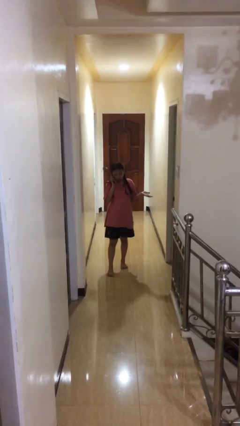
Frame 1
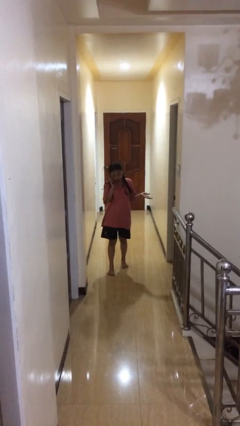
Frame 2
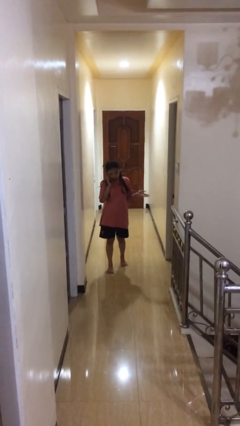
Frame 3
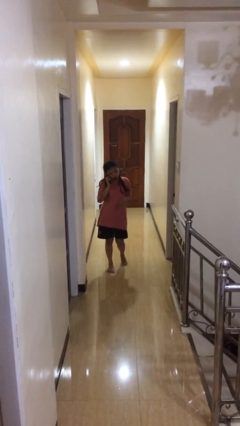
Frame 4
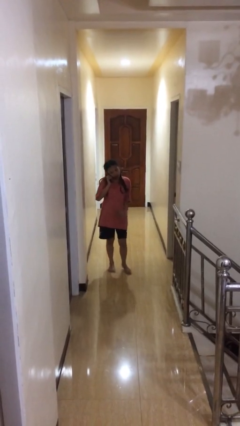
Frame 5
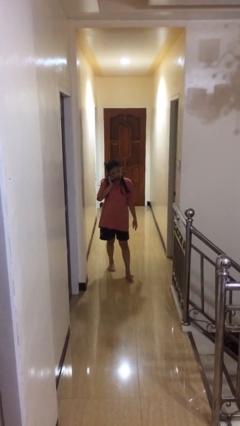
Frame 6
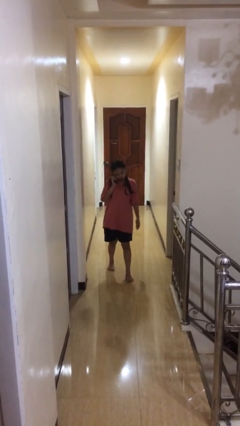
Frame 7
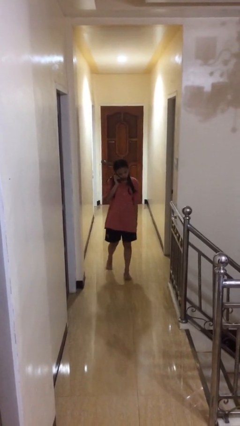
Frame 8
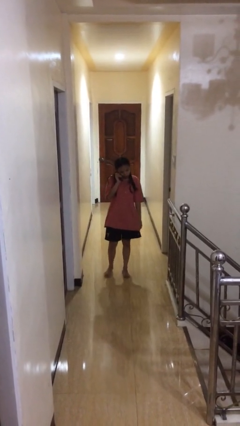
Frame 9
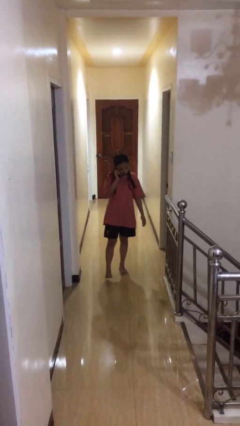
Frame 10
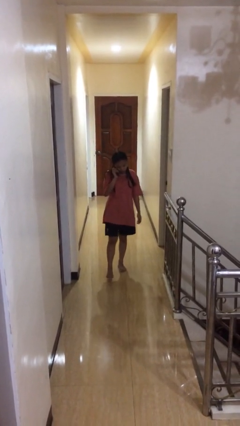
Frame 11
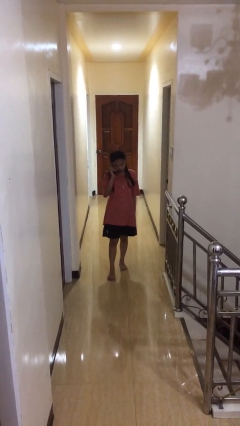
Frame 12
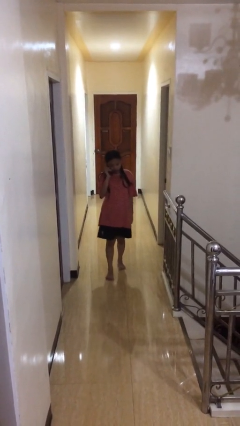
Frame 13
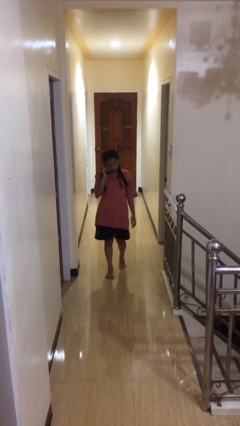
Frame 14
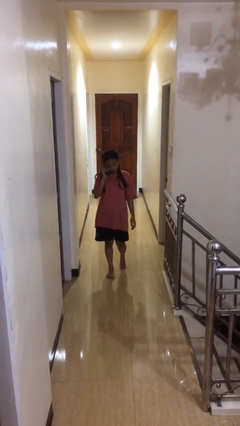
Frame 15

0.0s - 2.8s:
person talks on phone

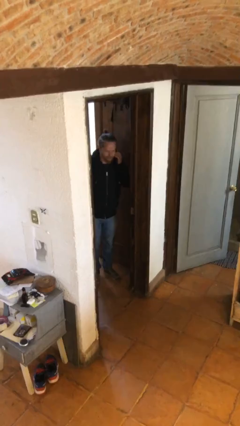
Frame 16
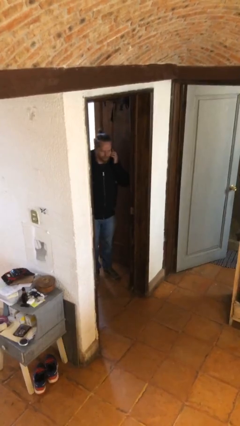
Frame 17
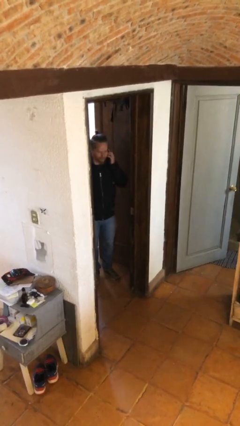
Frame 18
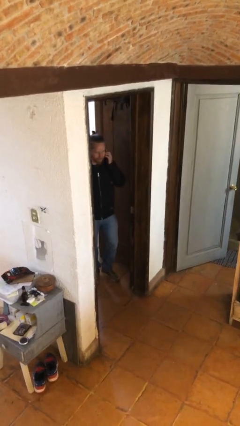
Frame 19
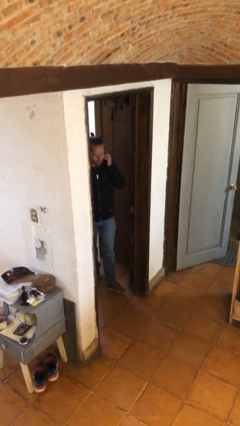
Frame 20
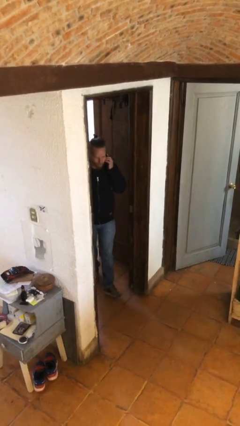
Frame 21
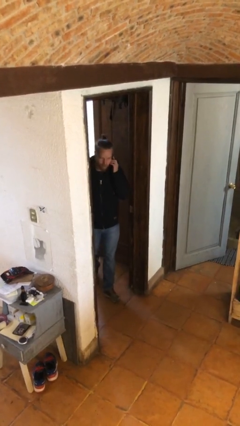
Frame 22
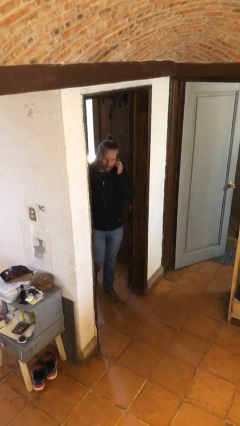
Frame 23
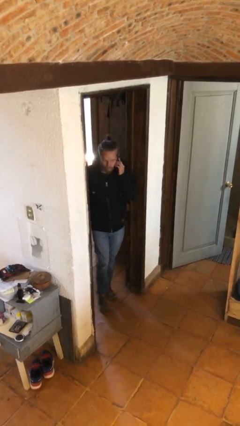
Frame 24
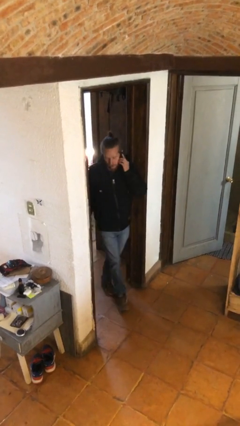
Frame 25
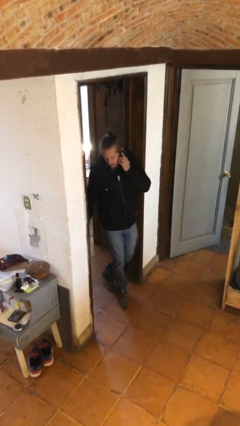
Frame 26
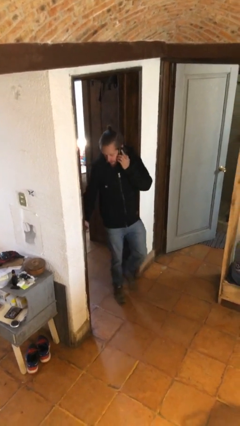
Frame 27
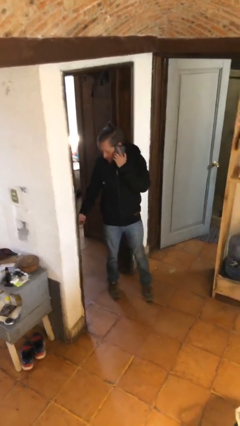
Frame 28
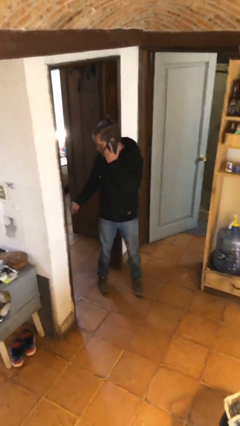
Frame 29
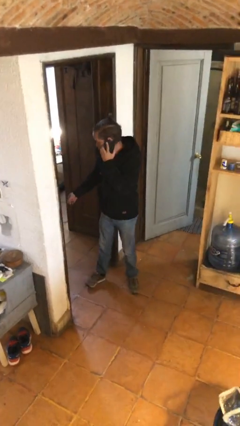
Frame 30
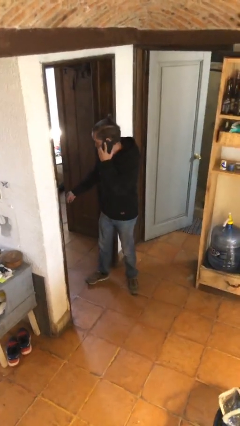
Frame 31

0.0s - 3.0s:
person enters scene through structure

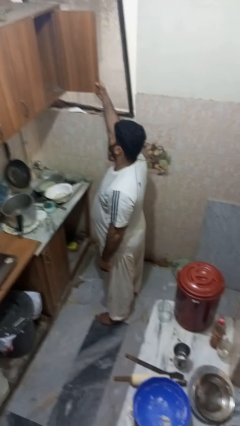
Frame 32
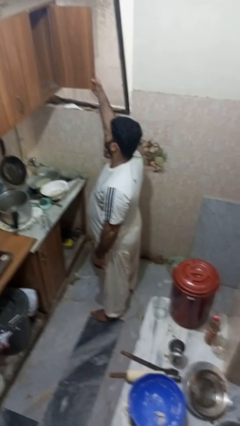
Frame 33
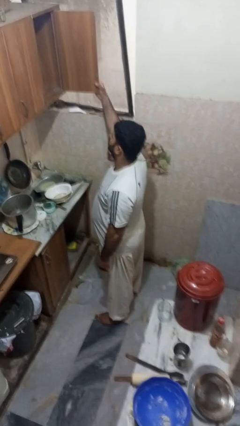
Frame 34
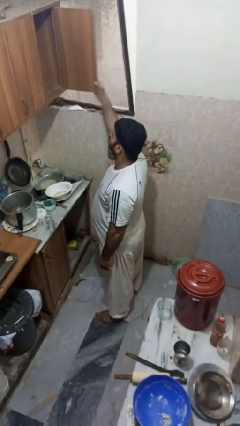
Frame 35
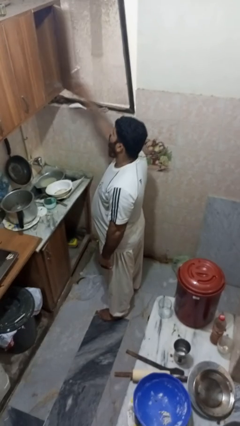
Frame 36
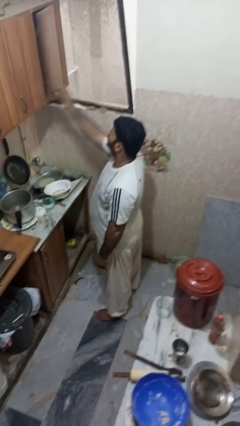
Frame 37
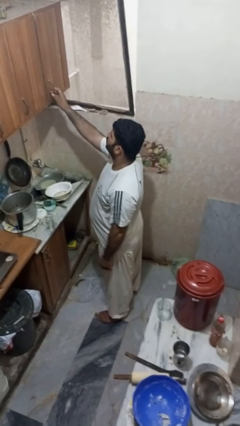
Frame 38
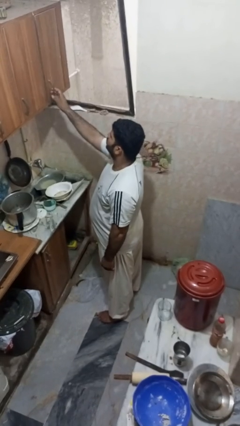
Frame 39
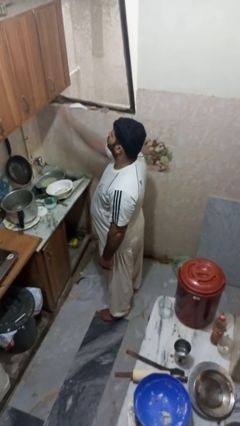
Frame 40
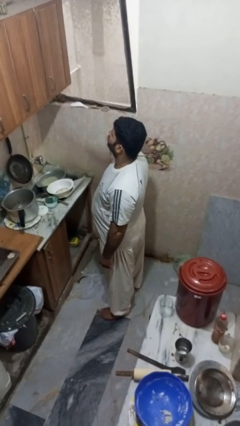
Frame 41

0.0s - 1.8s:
person closes cabinet

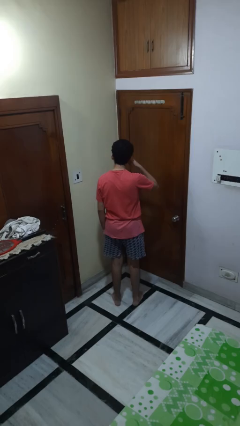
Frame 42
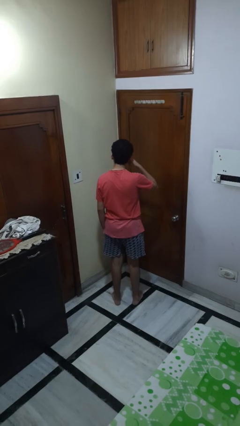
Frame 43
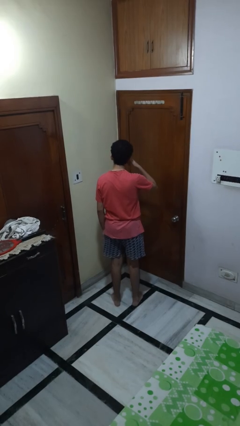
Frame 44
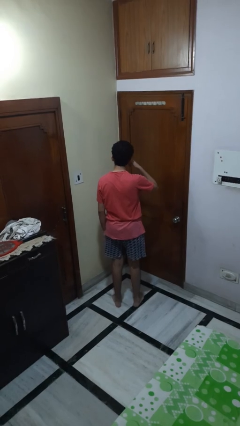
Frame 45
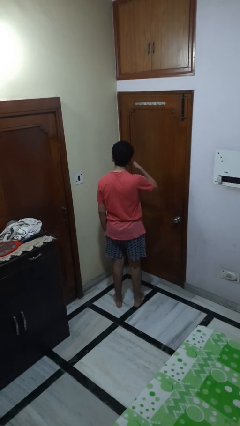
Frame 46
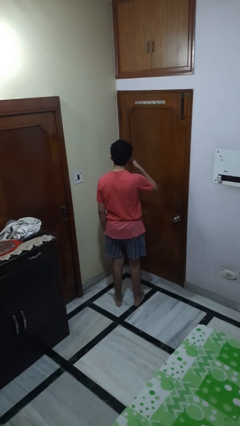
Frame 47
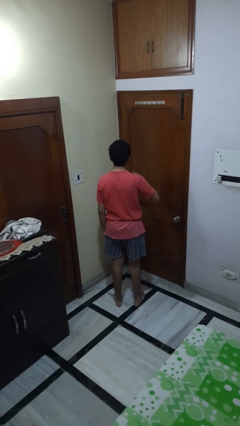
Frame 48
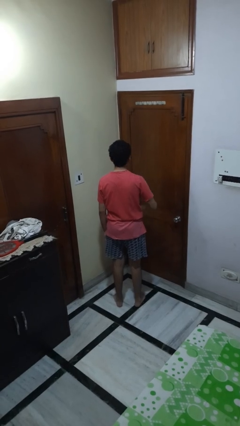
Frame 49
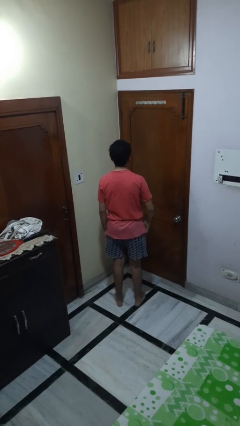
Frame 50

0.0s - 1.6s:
person gestures call me

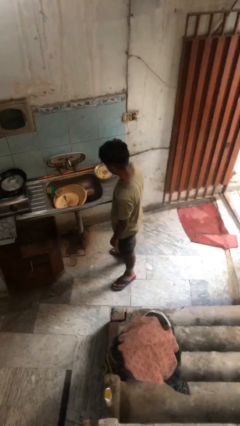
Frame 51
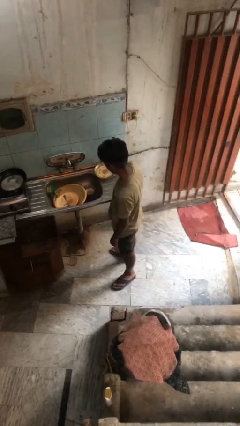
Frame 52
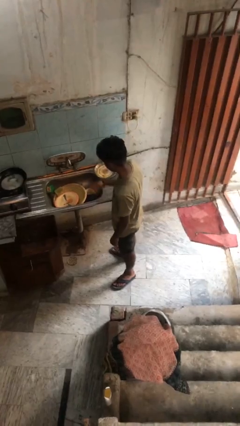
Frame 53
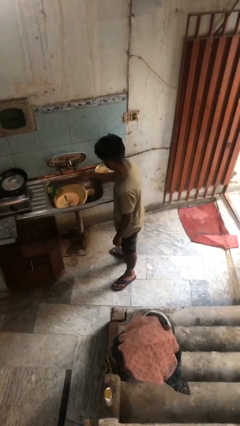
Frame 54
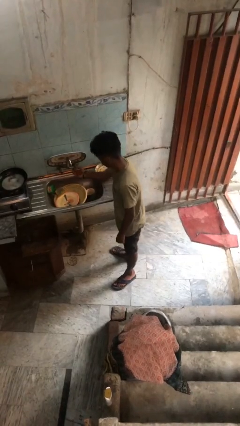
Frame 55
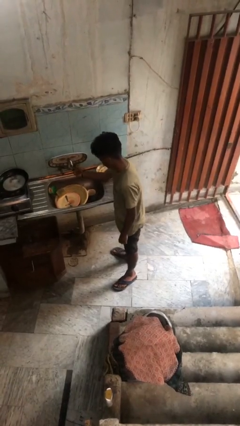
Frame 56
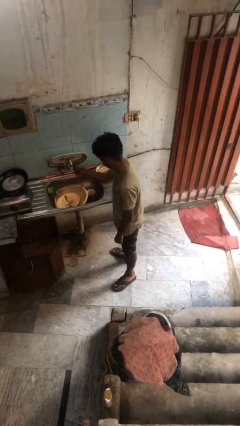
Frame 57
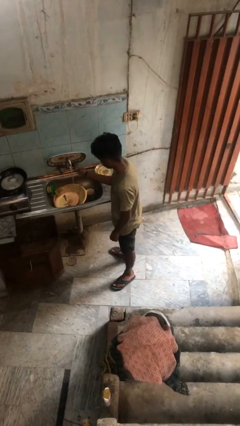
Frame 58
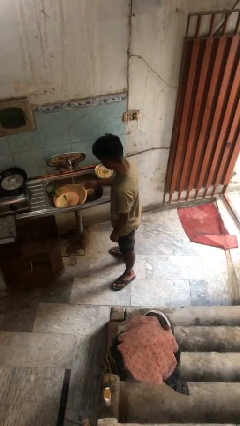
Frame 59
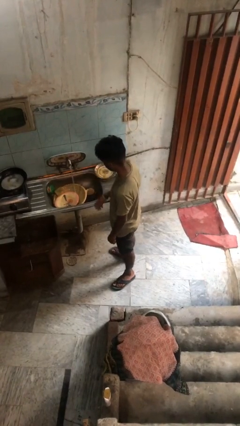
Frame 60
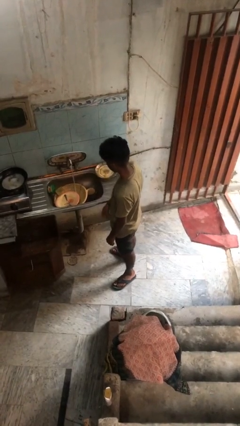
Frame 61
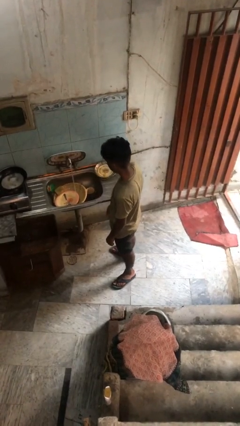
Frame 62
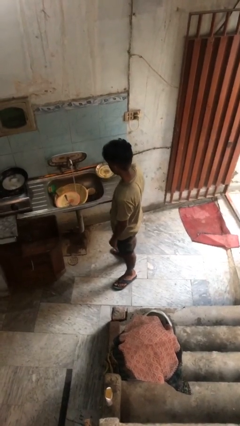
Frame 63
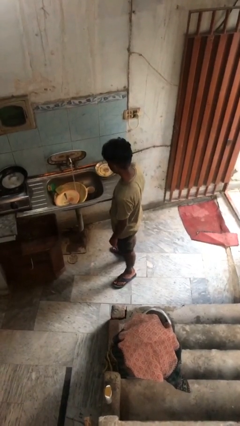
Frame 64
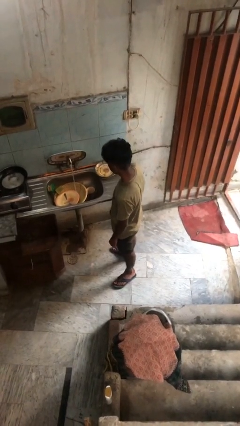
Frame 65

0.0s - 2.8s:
person turns on faucet

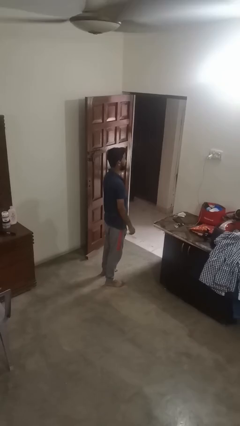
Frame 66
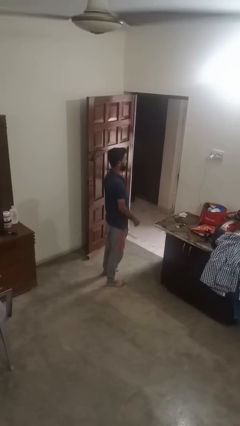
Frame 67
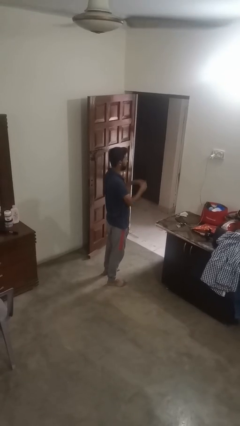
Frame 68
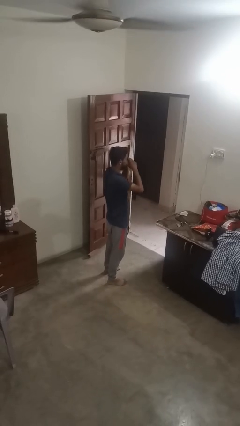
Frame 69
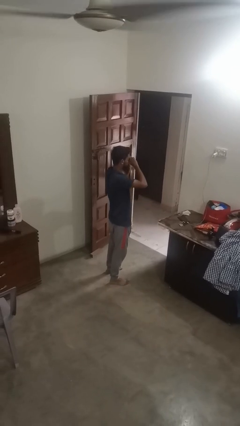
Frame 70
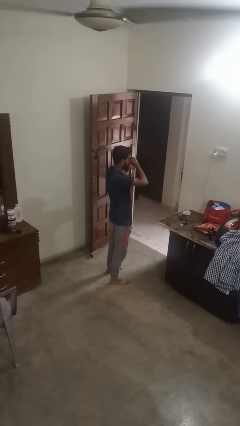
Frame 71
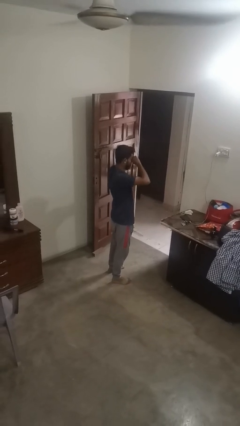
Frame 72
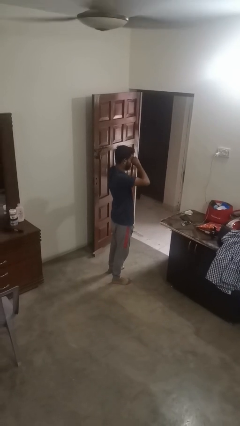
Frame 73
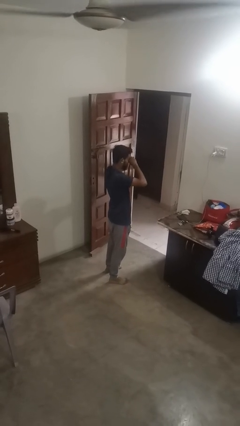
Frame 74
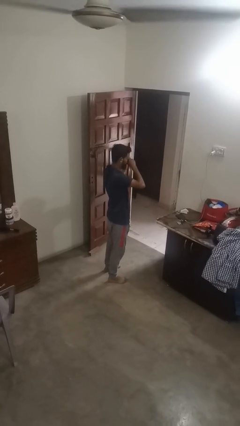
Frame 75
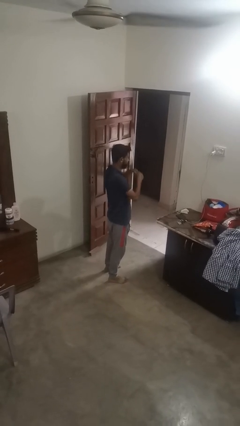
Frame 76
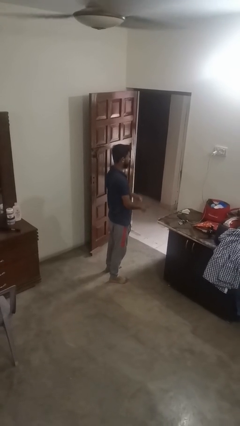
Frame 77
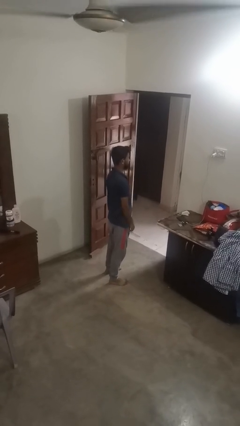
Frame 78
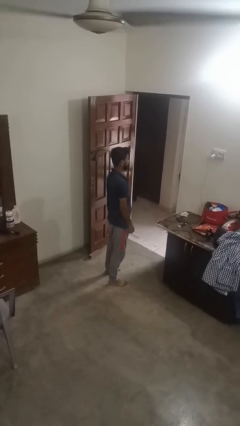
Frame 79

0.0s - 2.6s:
person rubs eyes

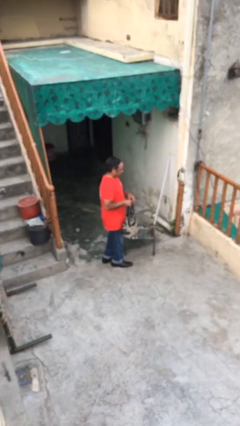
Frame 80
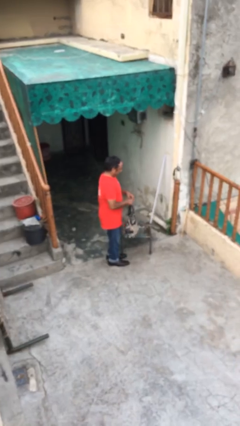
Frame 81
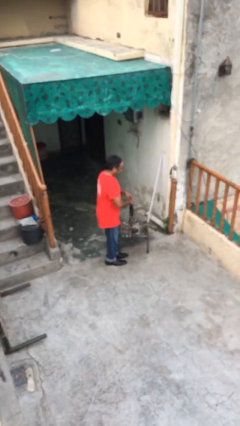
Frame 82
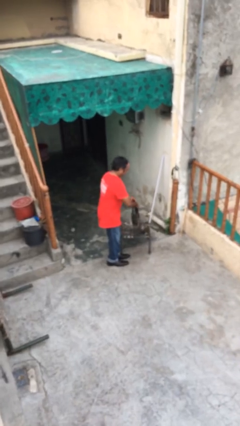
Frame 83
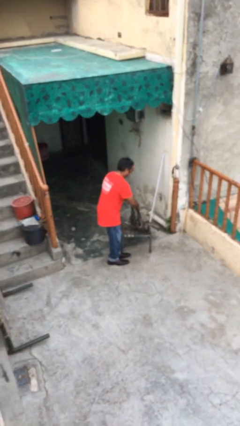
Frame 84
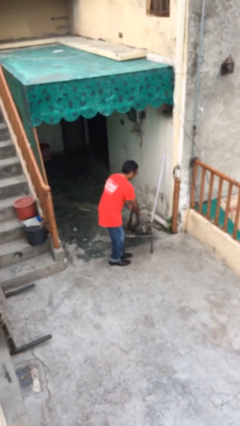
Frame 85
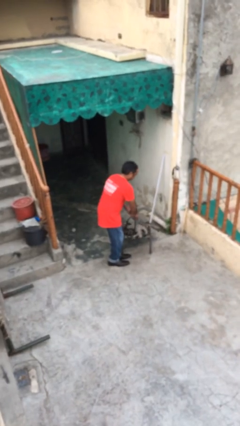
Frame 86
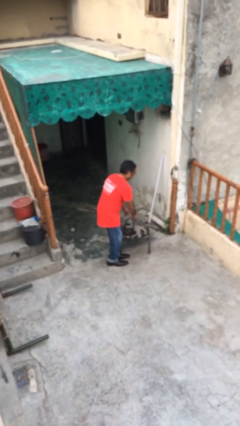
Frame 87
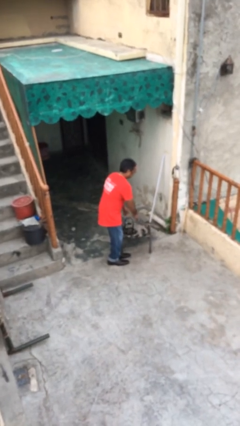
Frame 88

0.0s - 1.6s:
person puts down object on table

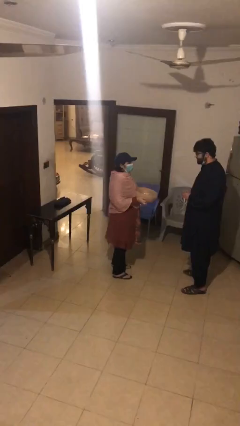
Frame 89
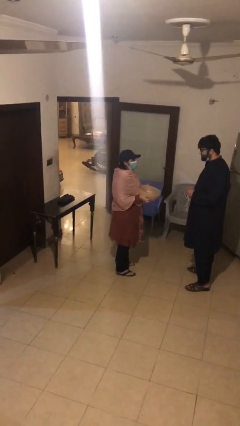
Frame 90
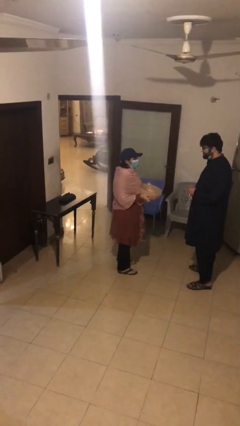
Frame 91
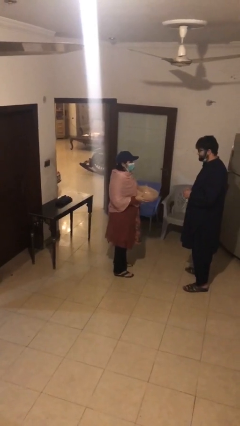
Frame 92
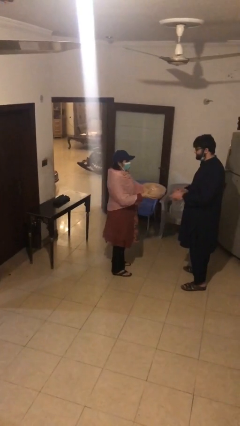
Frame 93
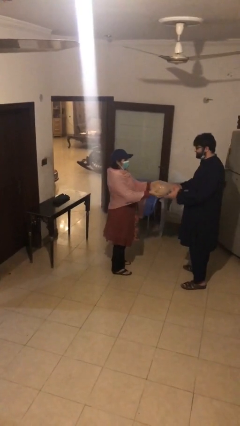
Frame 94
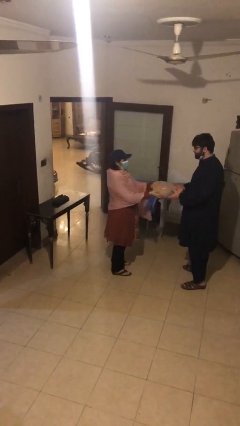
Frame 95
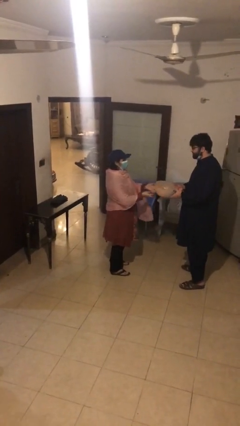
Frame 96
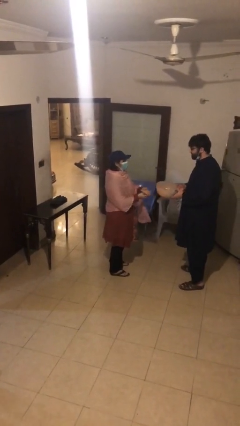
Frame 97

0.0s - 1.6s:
person transfers object to person
